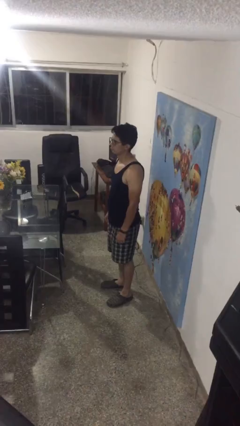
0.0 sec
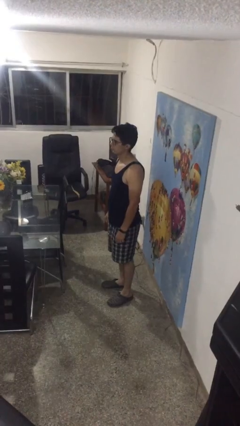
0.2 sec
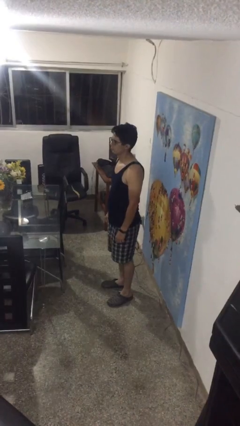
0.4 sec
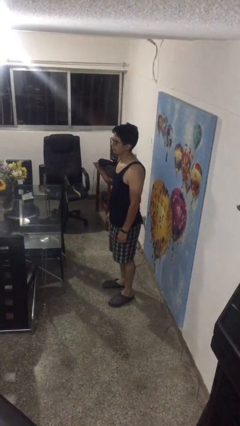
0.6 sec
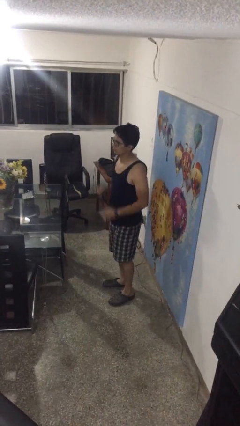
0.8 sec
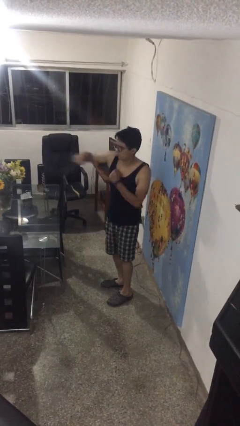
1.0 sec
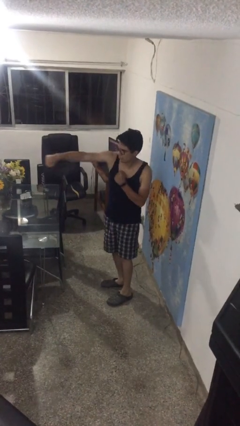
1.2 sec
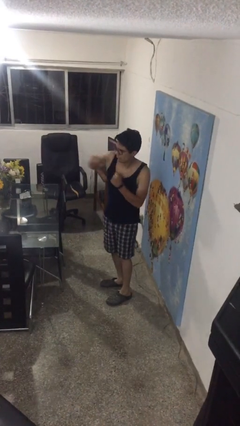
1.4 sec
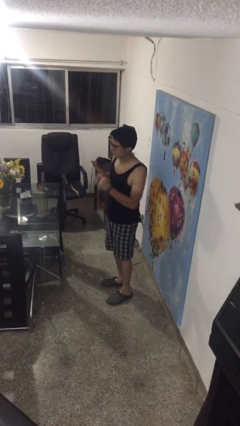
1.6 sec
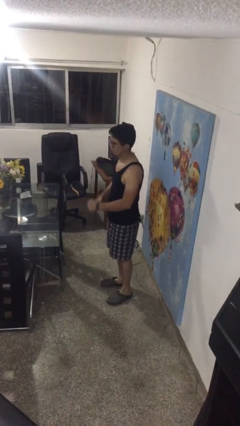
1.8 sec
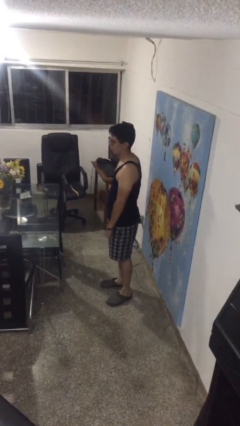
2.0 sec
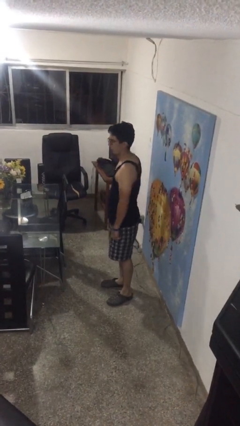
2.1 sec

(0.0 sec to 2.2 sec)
person punches

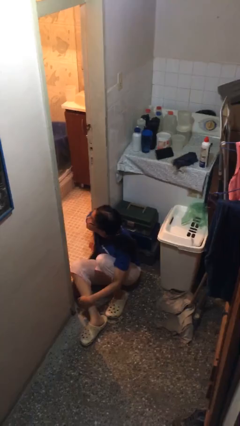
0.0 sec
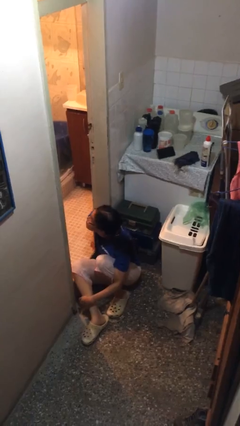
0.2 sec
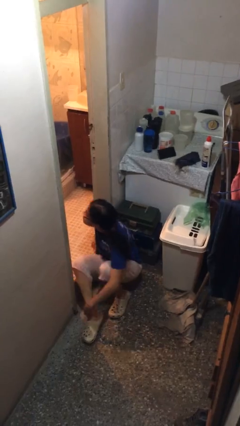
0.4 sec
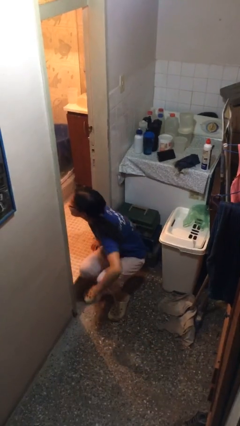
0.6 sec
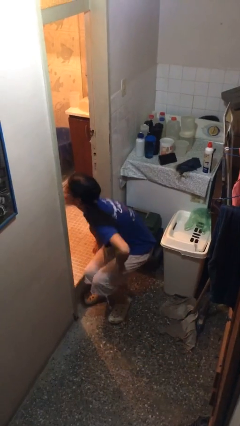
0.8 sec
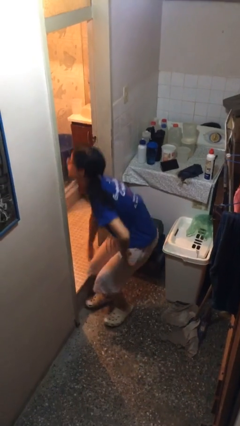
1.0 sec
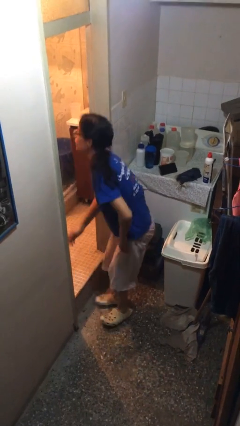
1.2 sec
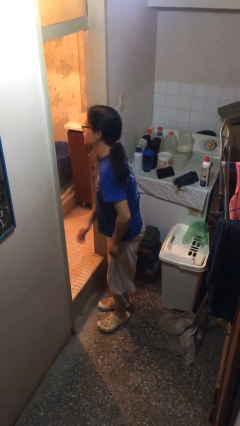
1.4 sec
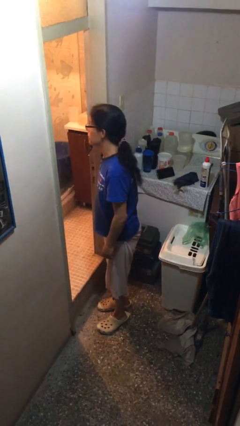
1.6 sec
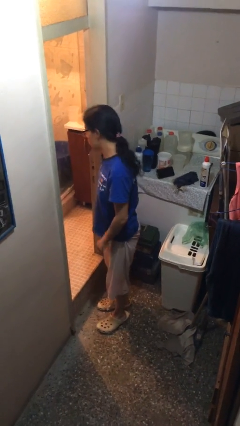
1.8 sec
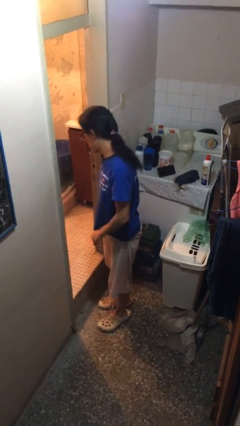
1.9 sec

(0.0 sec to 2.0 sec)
person stands up

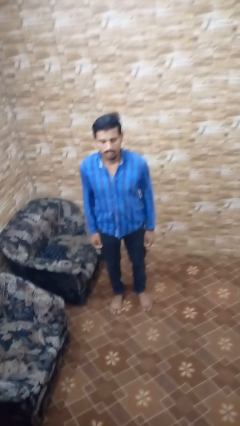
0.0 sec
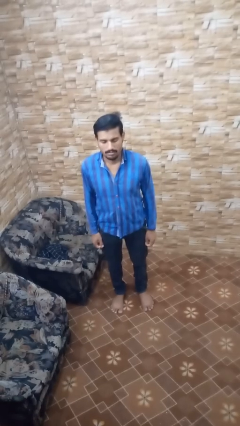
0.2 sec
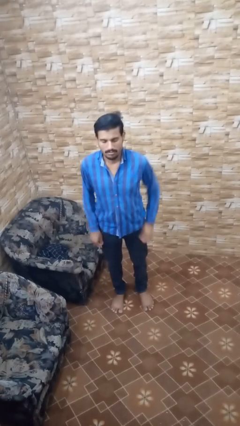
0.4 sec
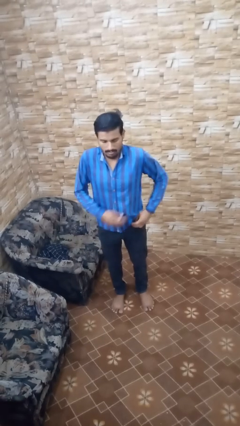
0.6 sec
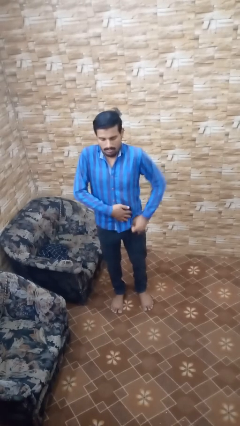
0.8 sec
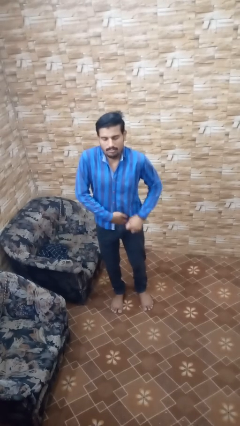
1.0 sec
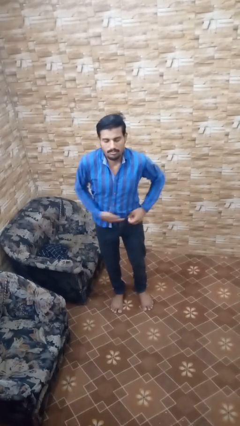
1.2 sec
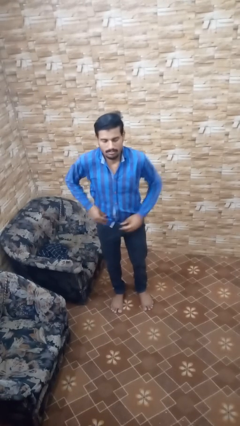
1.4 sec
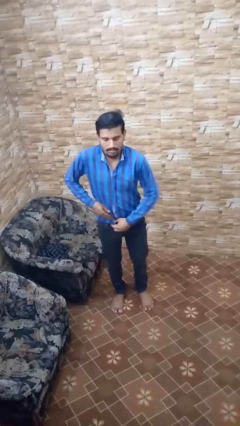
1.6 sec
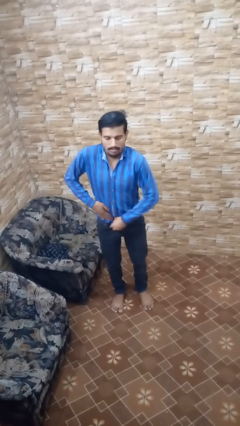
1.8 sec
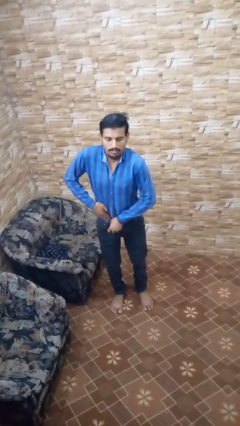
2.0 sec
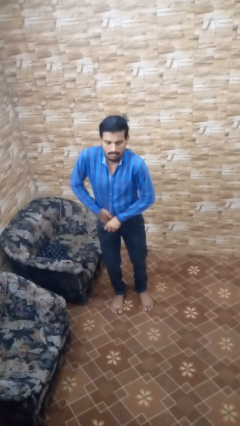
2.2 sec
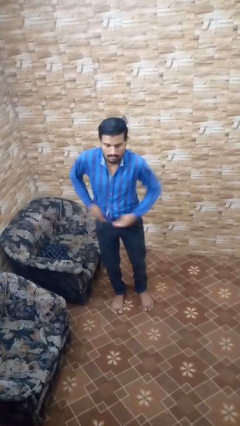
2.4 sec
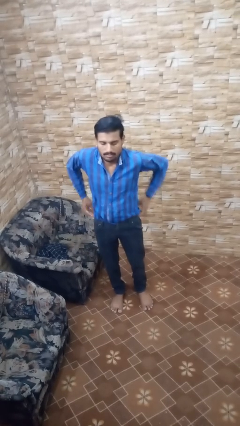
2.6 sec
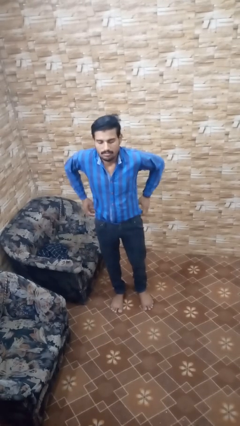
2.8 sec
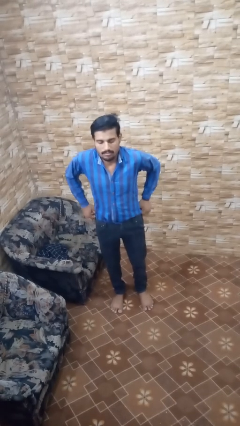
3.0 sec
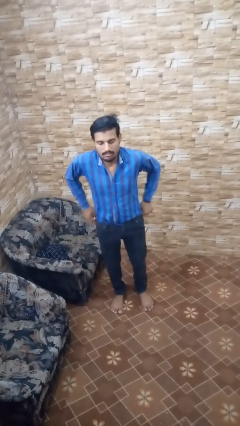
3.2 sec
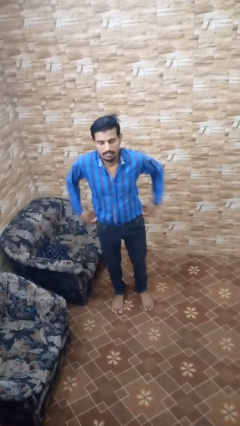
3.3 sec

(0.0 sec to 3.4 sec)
person tucks in shirt

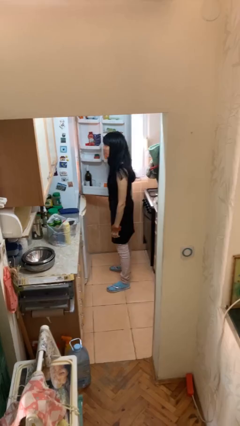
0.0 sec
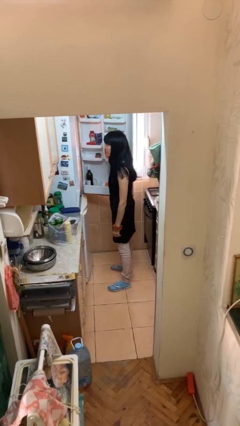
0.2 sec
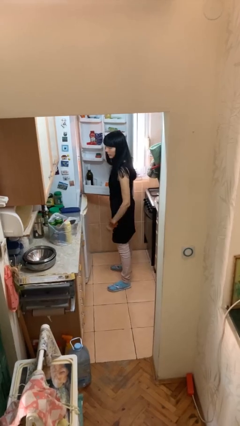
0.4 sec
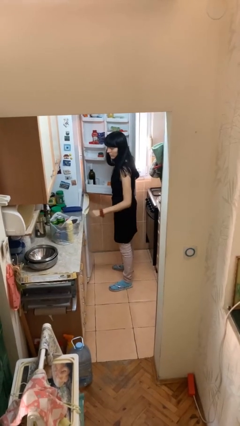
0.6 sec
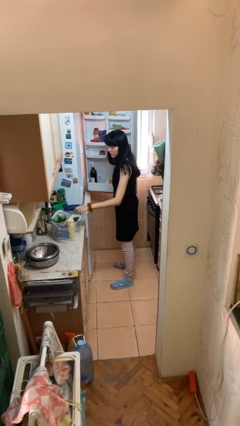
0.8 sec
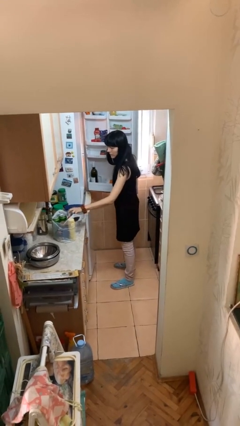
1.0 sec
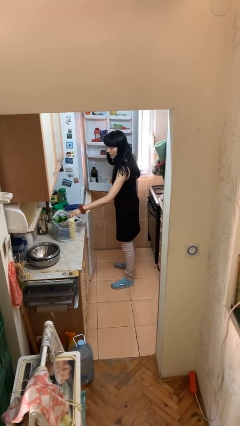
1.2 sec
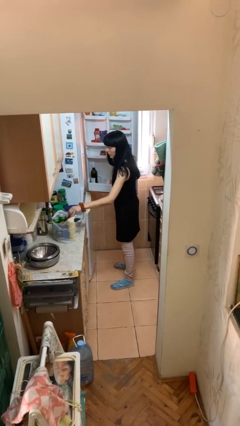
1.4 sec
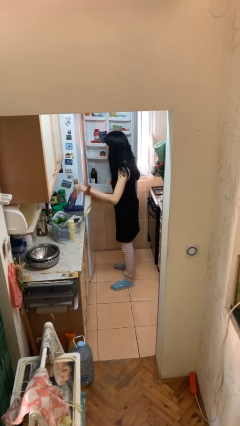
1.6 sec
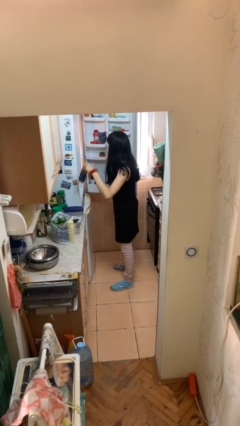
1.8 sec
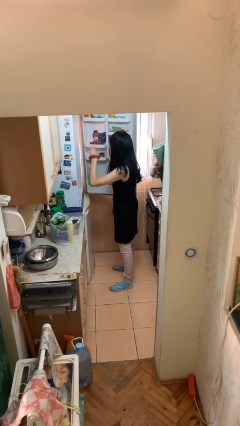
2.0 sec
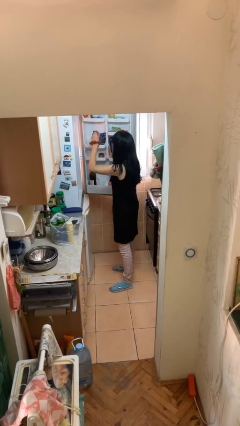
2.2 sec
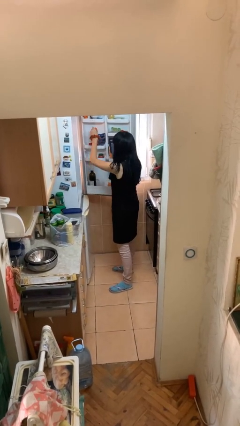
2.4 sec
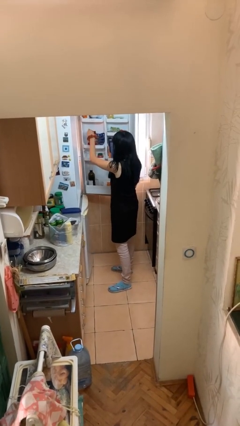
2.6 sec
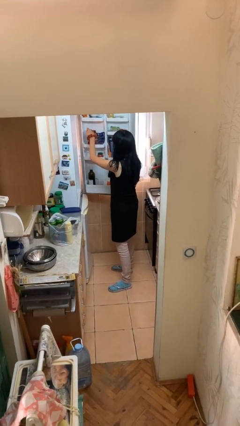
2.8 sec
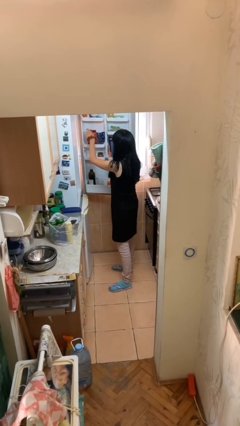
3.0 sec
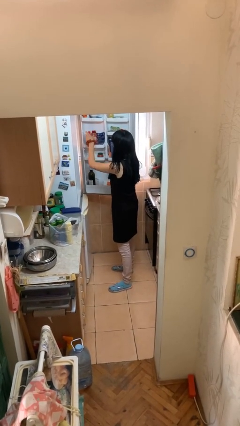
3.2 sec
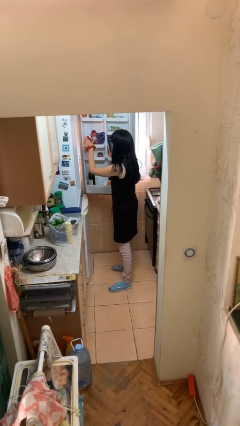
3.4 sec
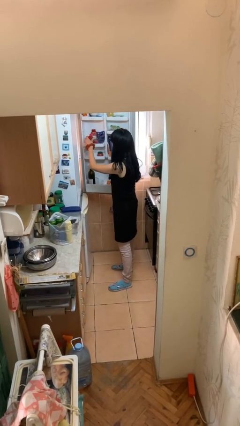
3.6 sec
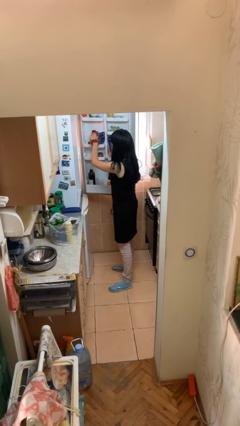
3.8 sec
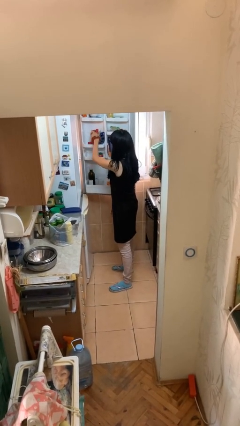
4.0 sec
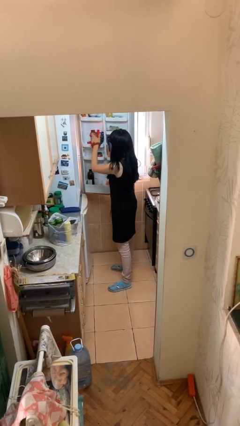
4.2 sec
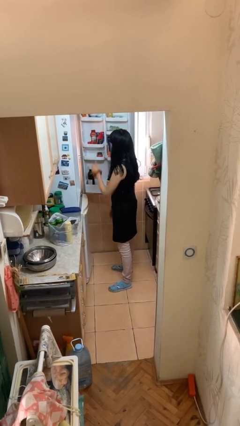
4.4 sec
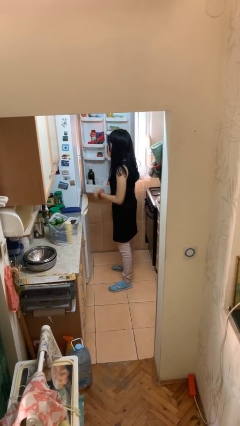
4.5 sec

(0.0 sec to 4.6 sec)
person loads groceries into refrigerator

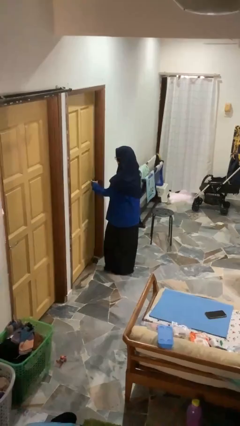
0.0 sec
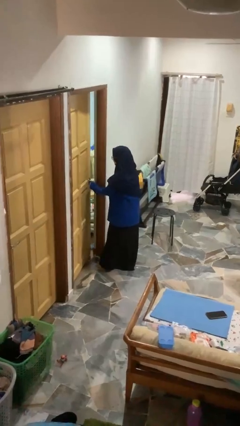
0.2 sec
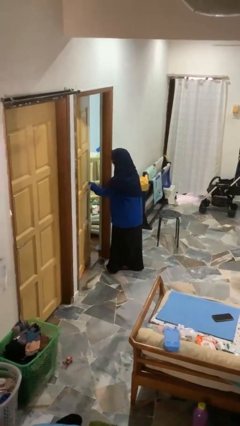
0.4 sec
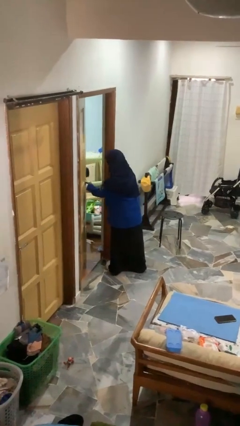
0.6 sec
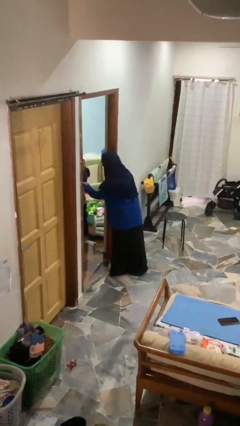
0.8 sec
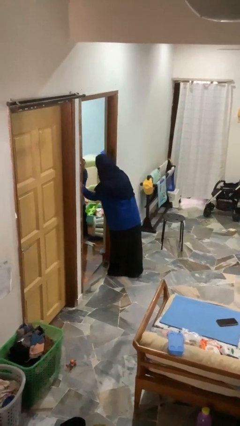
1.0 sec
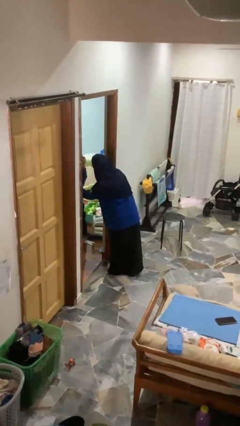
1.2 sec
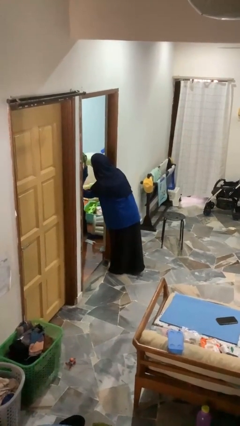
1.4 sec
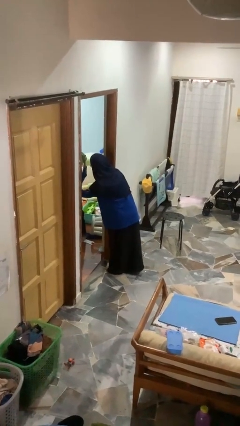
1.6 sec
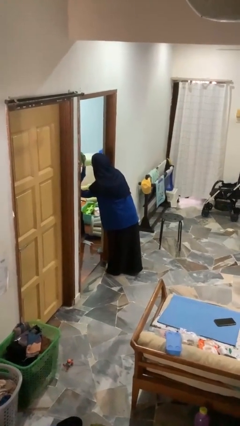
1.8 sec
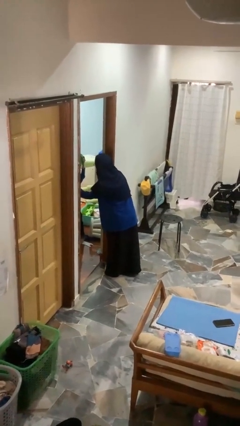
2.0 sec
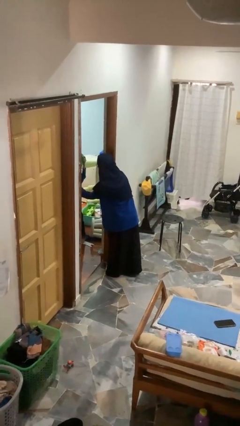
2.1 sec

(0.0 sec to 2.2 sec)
person opens facility door

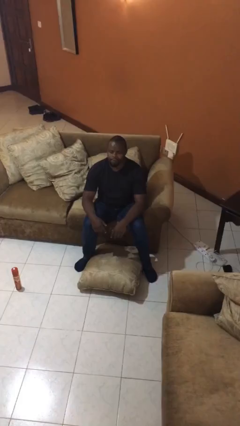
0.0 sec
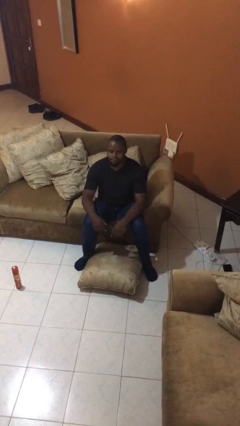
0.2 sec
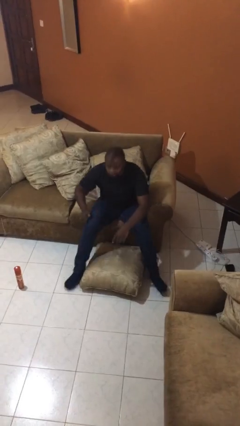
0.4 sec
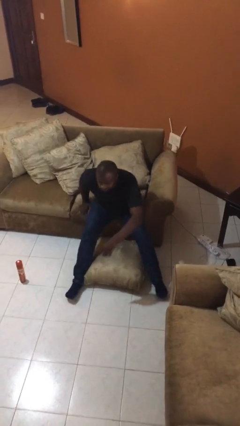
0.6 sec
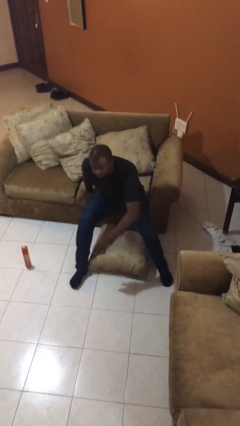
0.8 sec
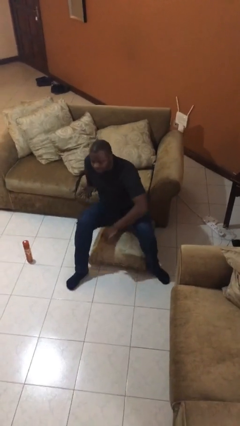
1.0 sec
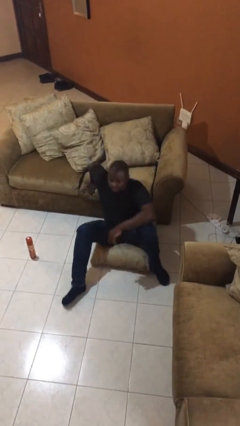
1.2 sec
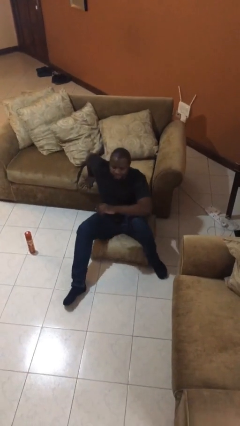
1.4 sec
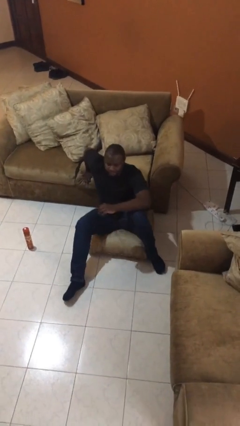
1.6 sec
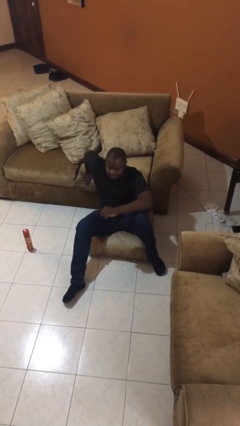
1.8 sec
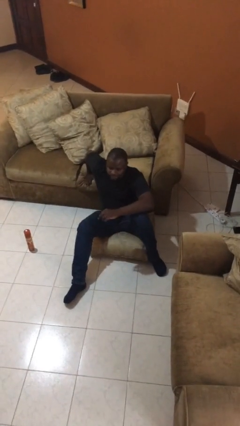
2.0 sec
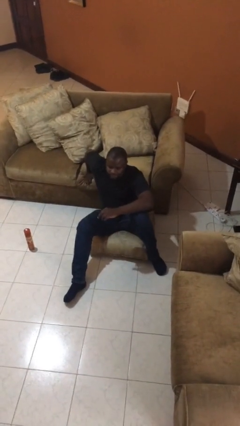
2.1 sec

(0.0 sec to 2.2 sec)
person falls from chair

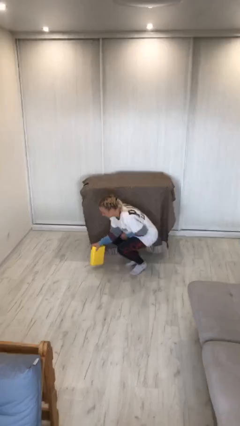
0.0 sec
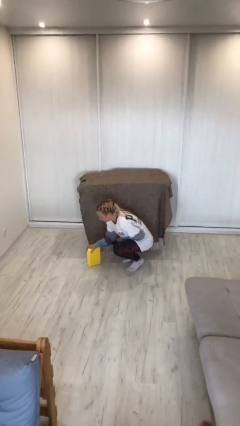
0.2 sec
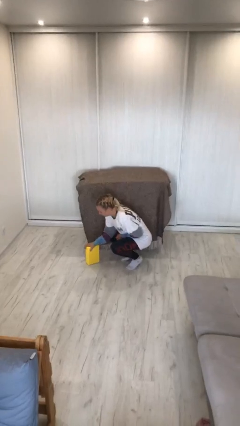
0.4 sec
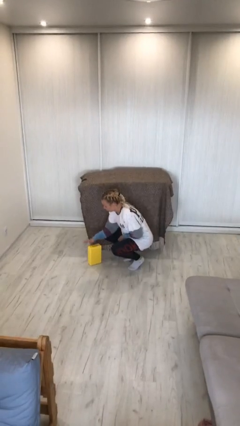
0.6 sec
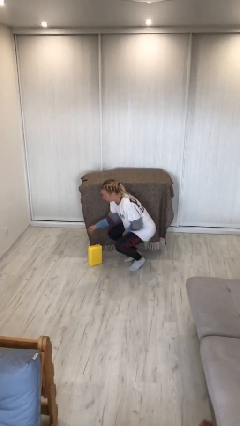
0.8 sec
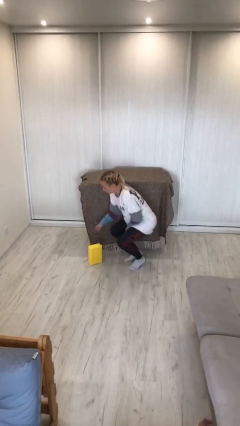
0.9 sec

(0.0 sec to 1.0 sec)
person puts down object on floor
